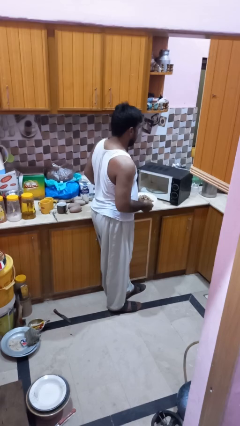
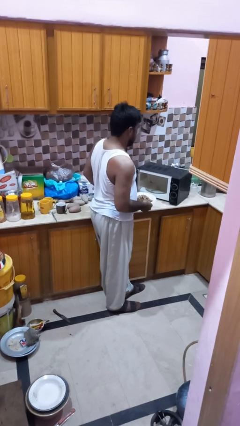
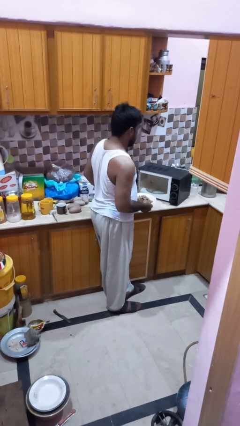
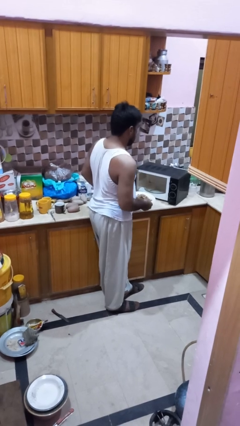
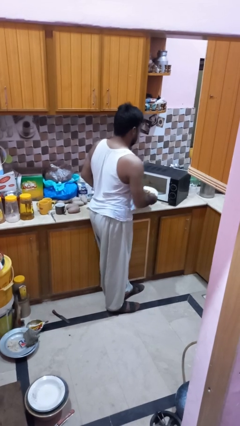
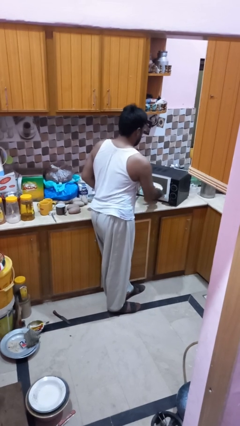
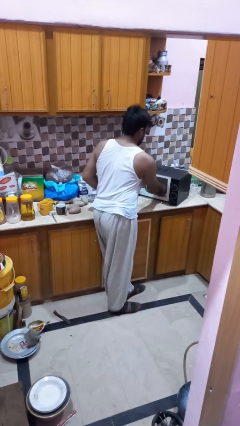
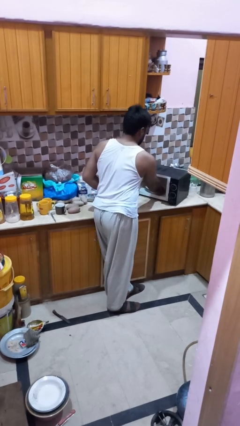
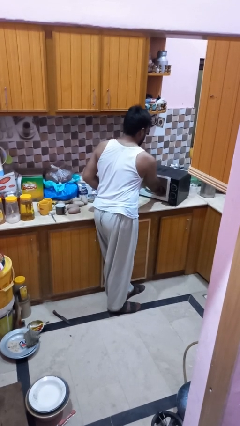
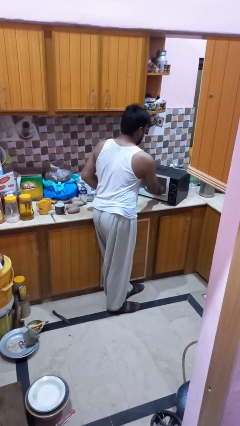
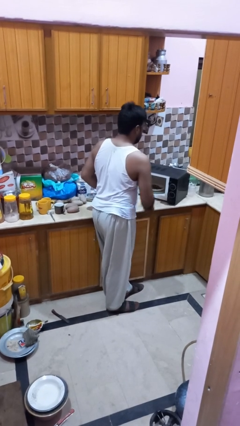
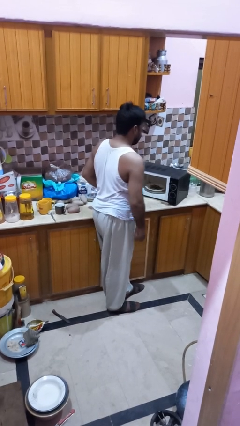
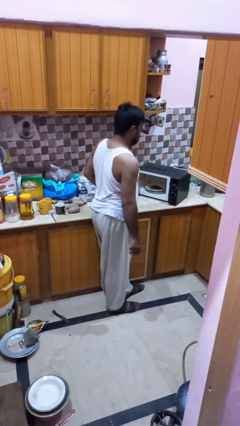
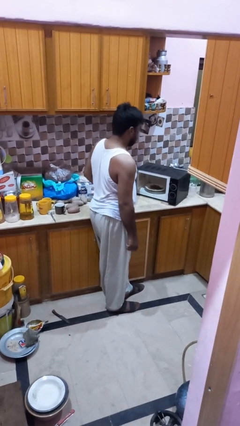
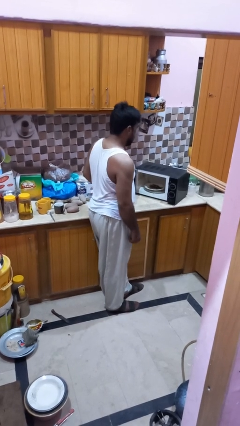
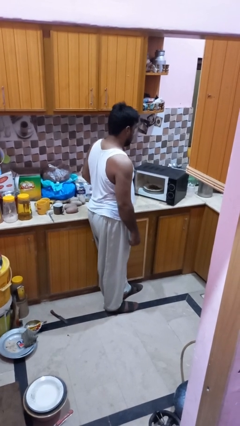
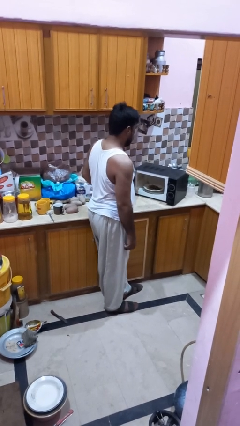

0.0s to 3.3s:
person puts object into microwave

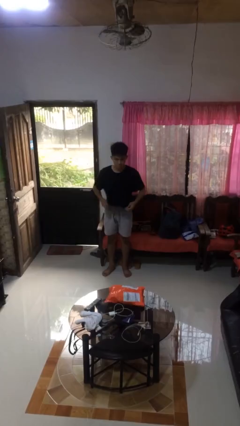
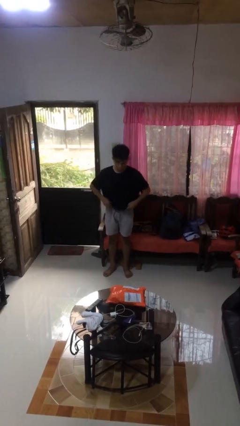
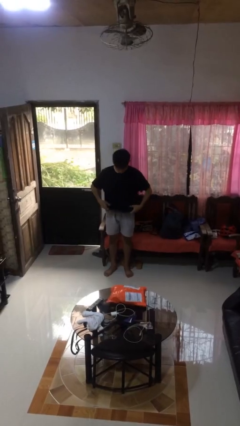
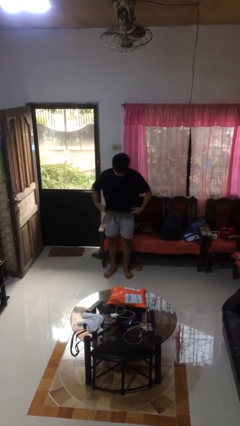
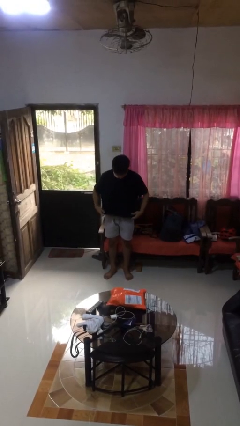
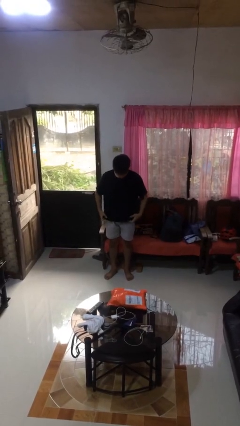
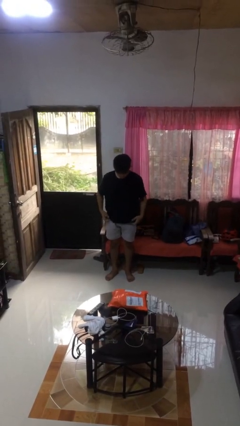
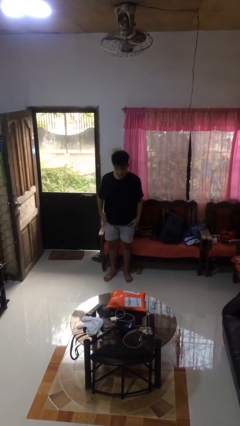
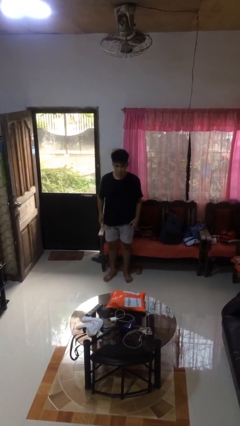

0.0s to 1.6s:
person untucks shirt

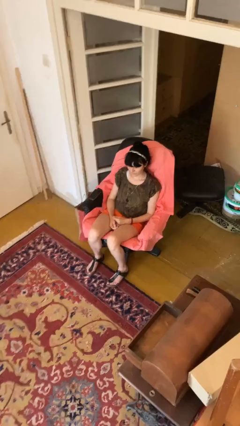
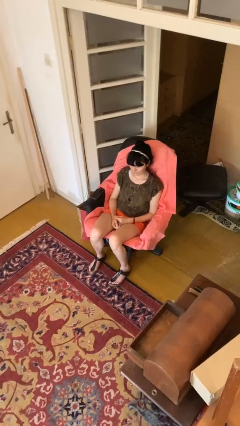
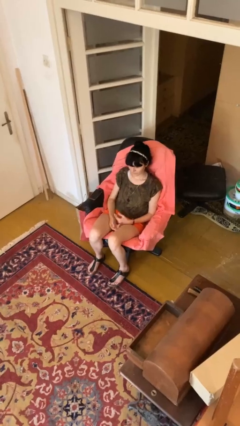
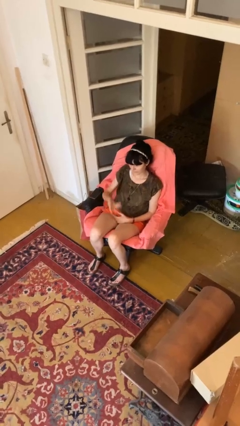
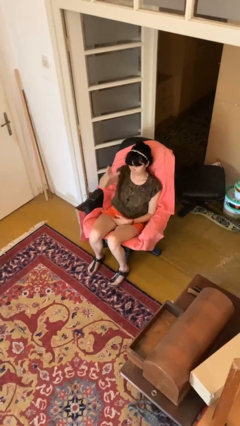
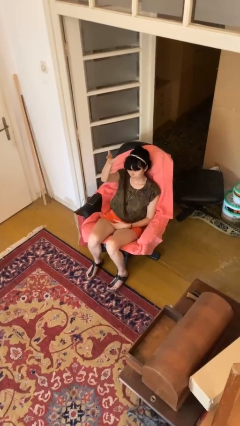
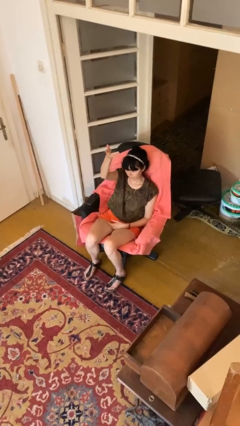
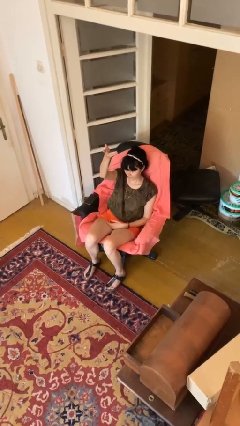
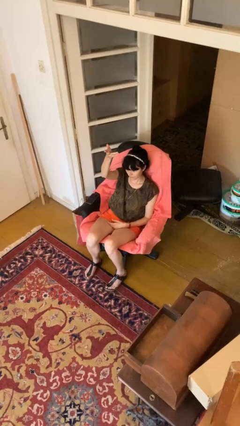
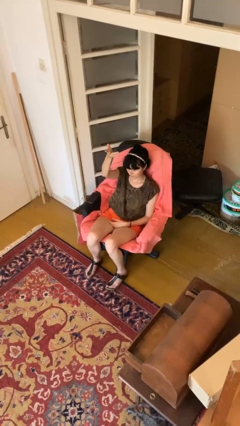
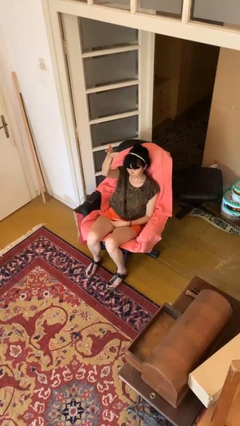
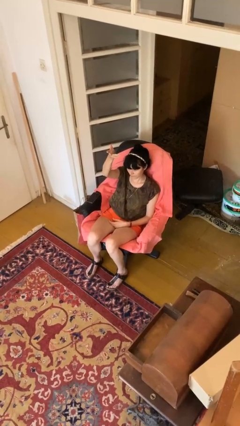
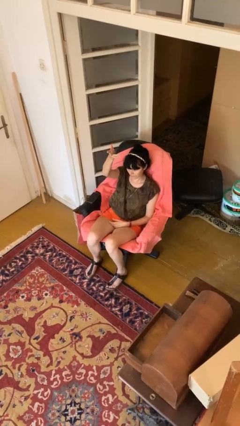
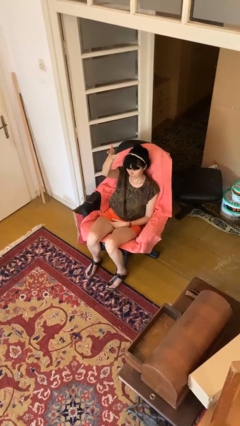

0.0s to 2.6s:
person gestures swipe up

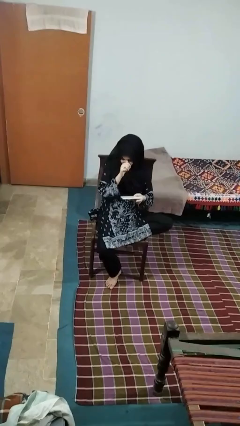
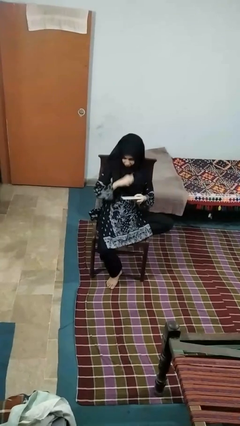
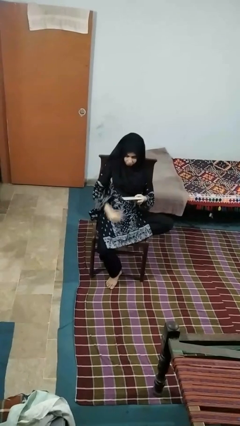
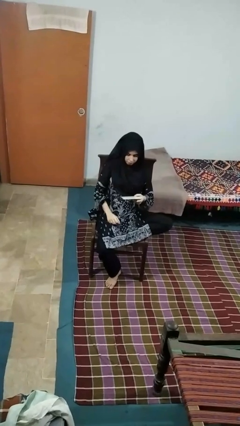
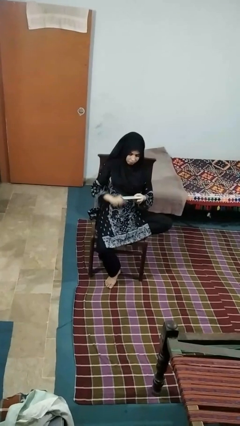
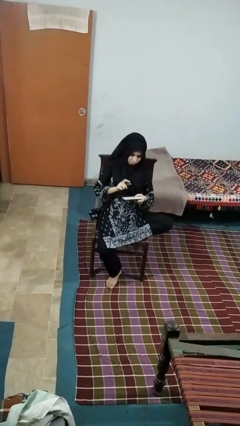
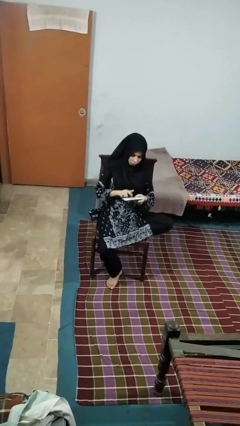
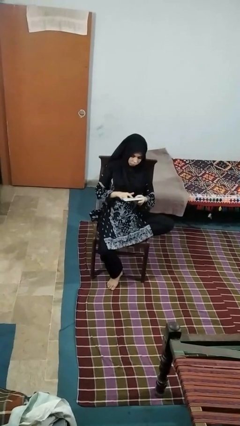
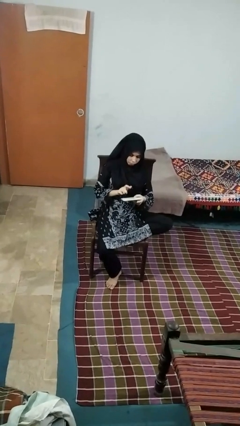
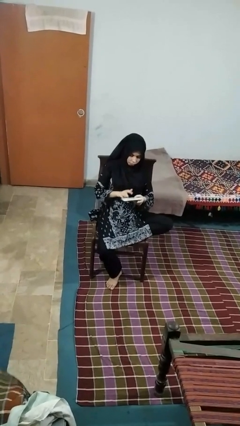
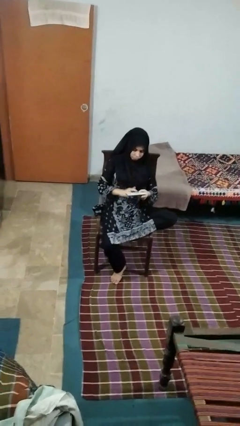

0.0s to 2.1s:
person taps object with finger

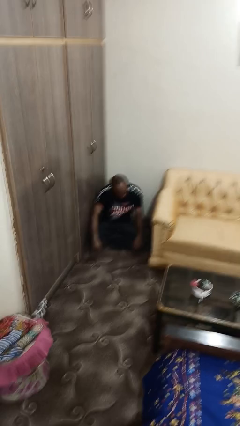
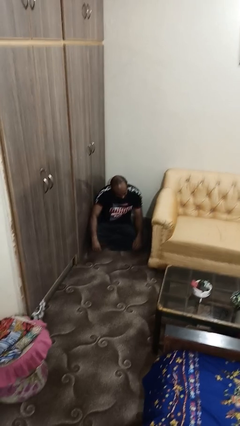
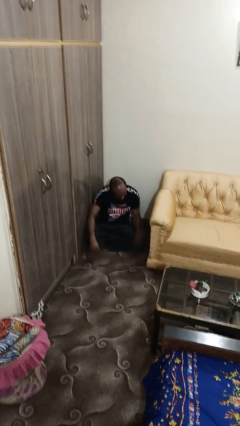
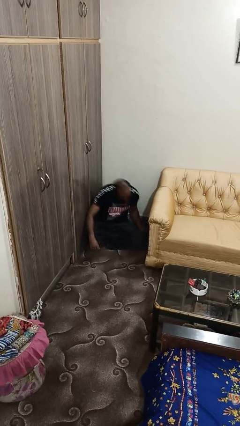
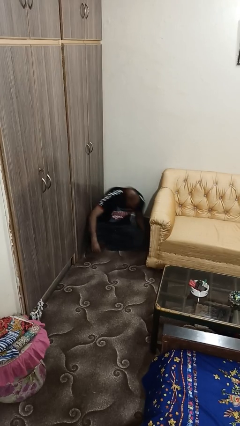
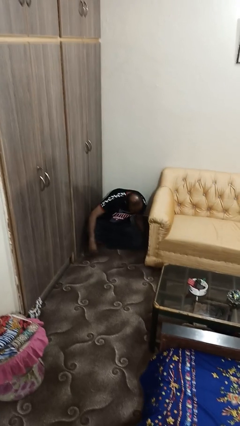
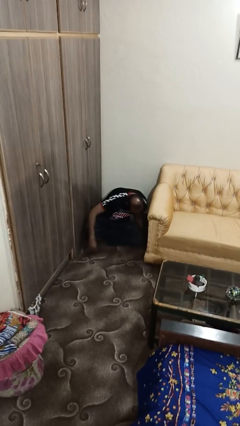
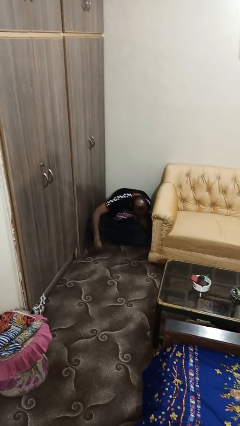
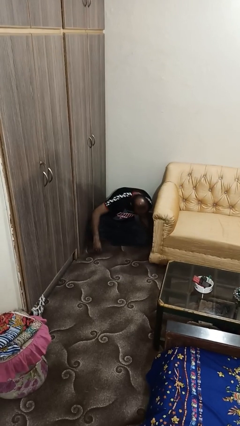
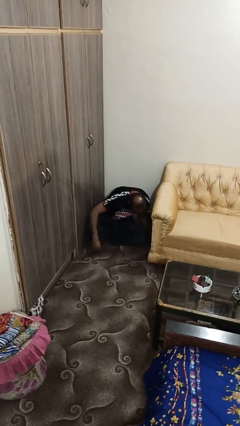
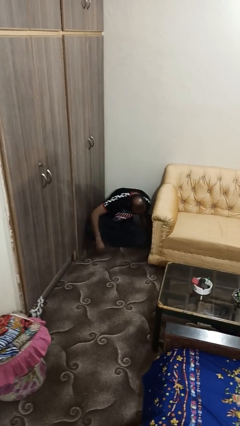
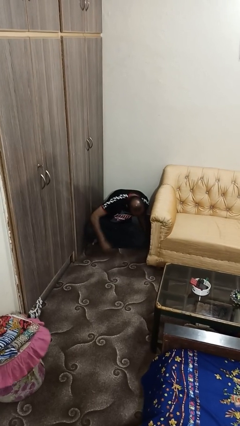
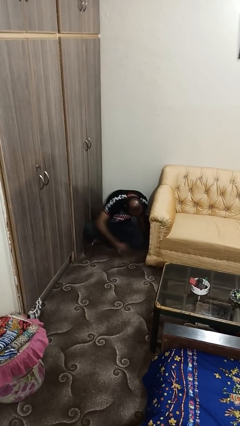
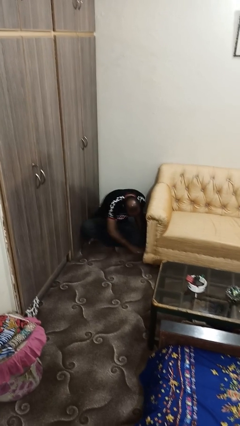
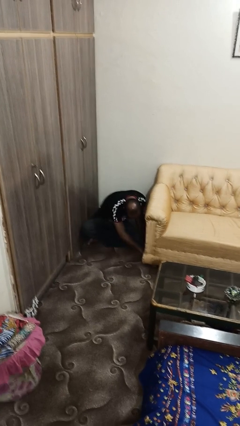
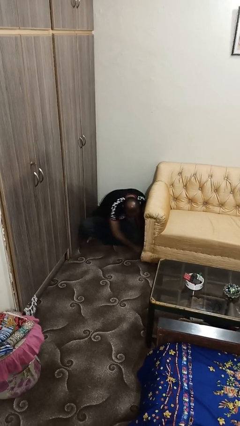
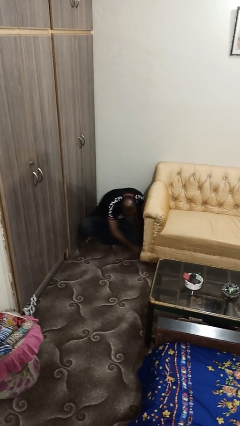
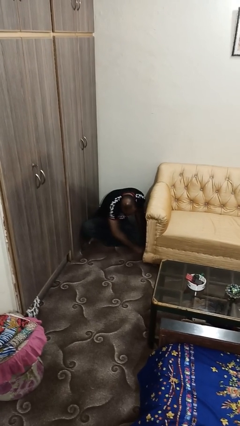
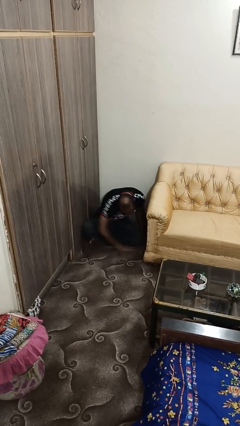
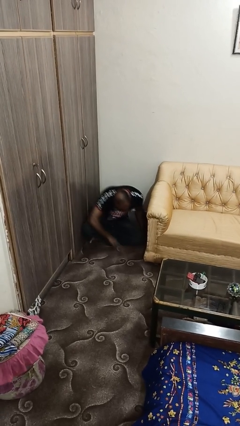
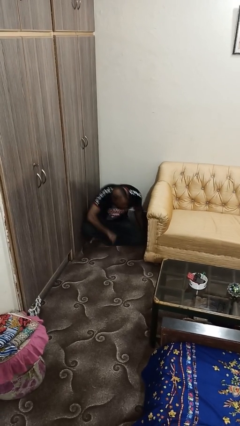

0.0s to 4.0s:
person searches under couch

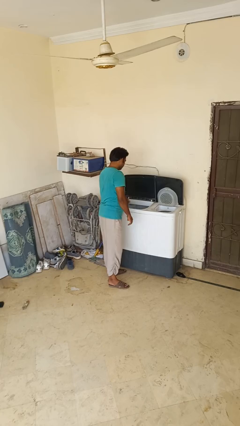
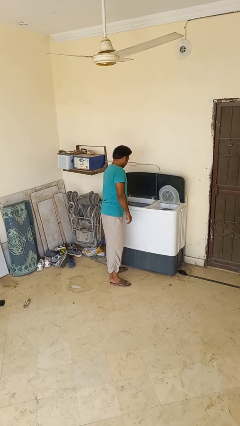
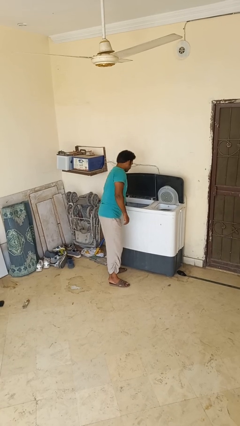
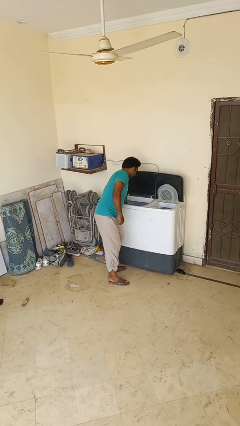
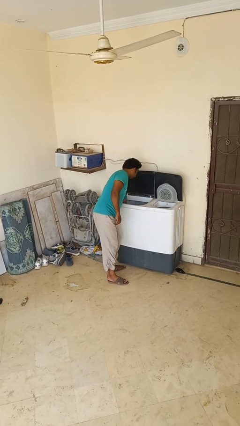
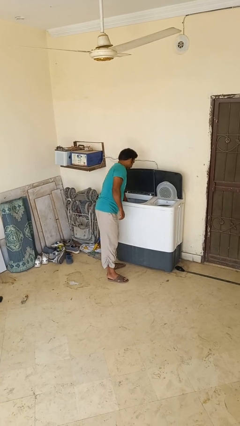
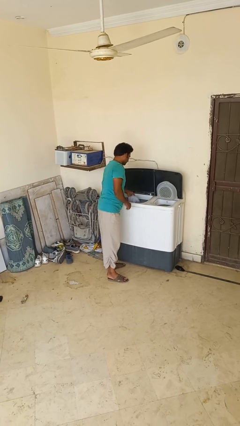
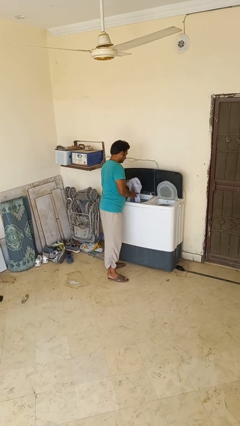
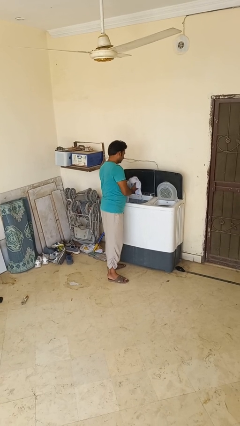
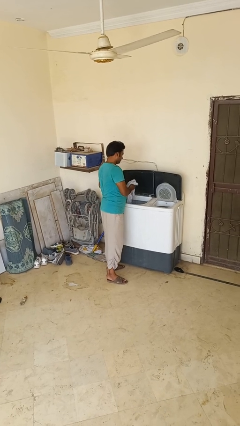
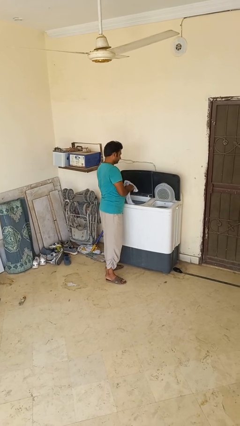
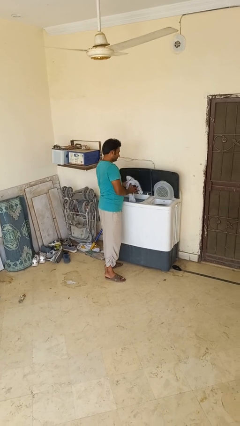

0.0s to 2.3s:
person unloads clotheswasher

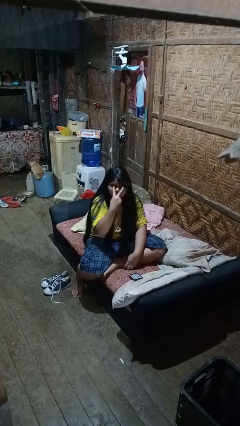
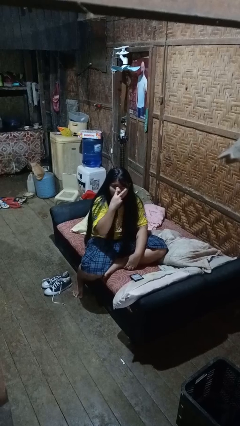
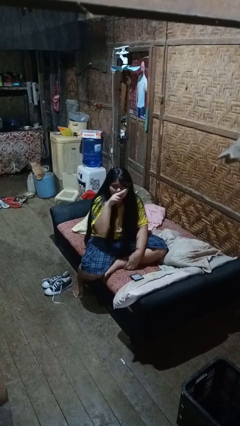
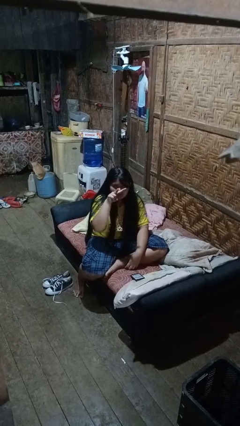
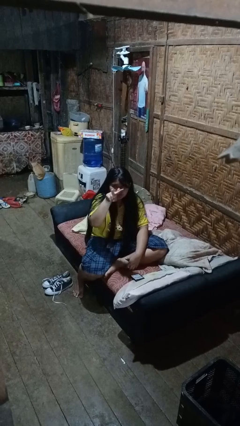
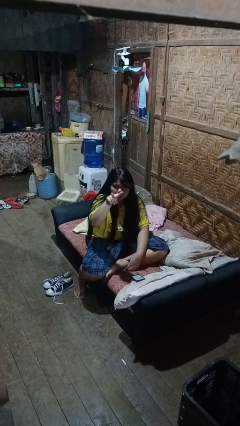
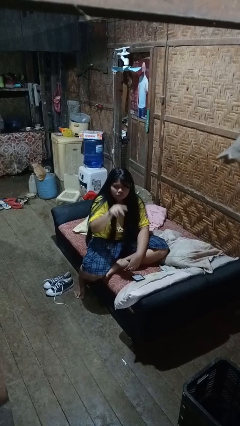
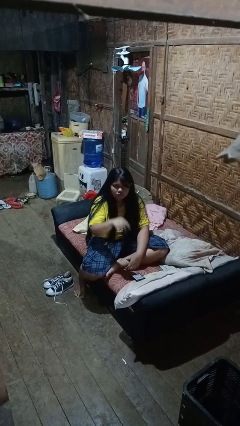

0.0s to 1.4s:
person gestures watch closely

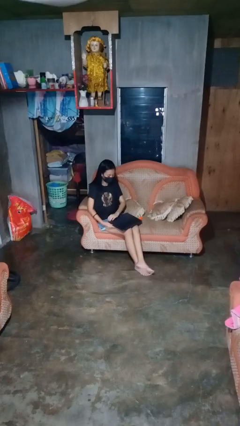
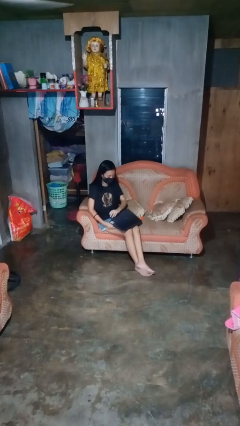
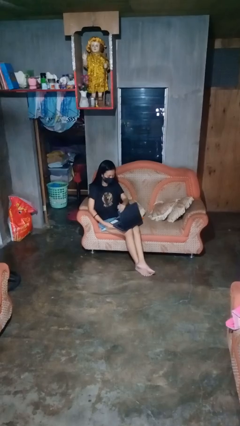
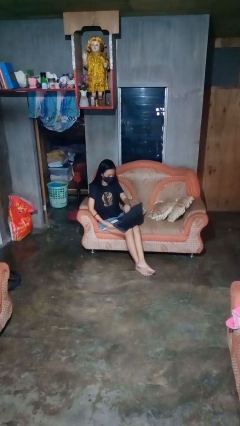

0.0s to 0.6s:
person opens laptop
